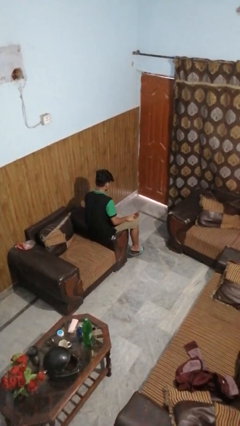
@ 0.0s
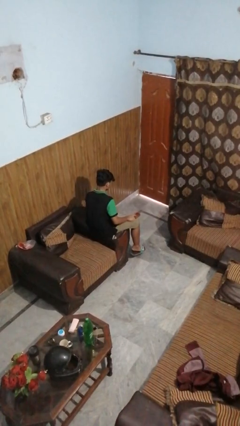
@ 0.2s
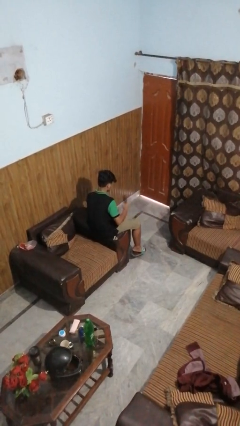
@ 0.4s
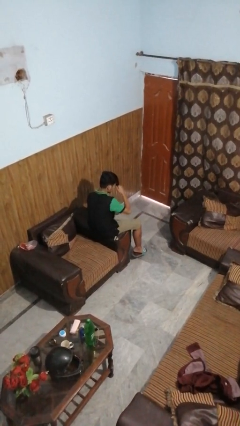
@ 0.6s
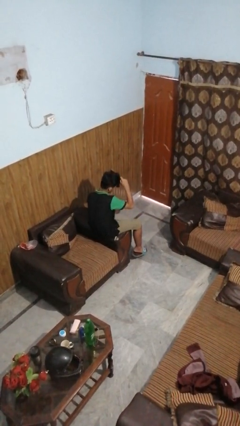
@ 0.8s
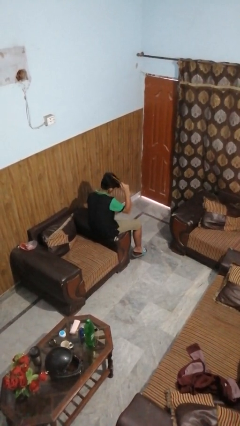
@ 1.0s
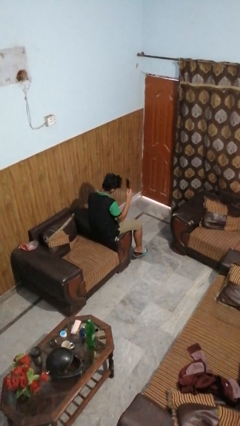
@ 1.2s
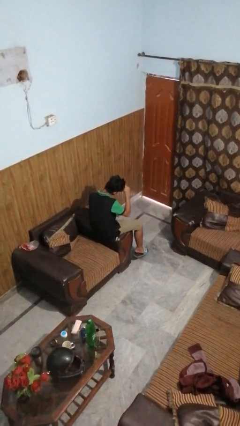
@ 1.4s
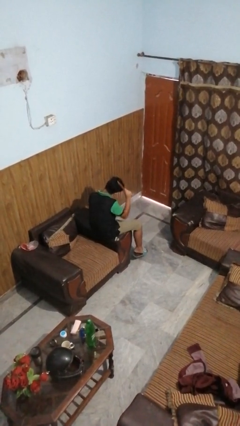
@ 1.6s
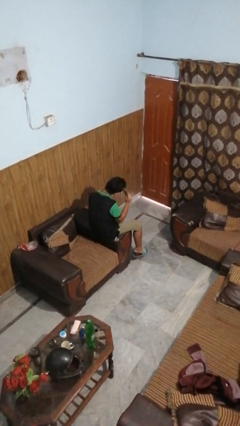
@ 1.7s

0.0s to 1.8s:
person brushes hair

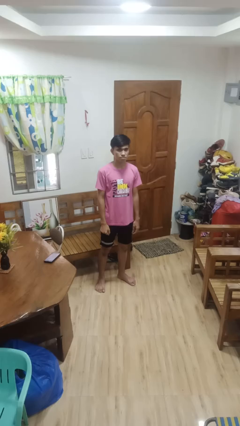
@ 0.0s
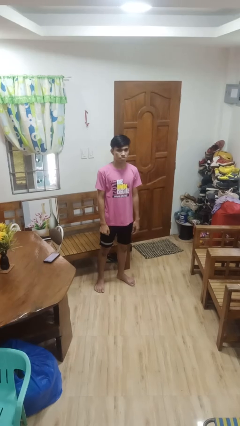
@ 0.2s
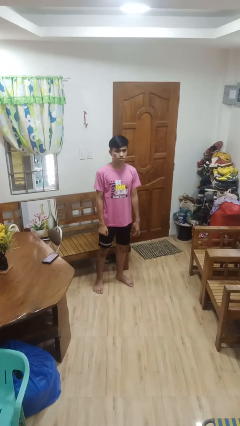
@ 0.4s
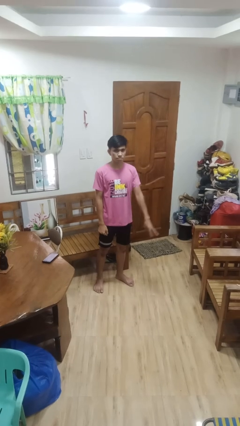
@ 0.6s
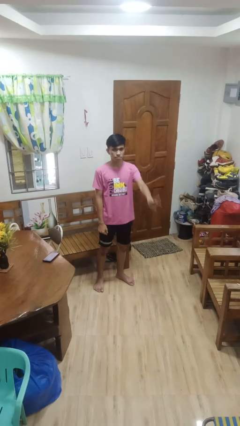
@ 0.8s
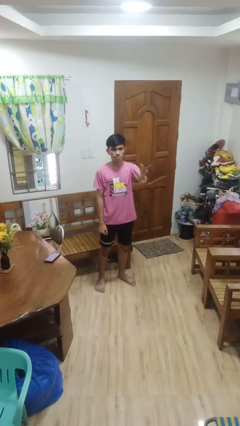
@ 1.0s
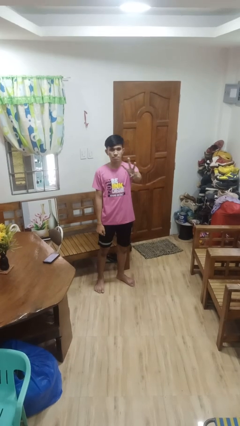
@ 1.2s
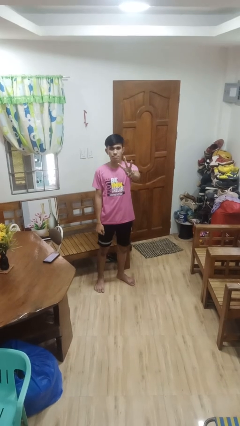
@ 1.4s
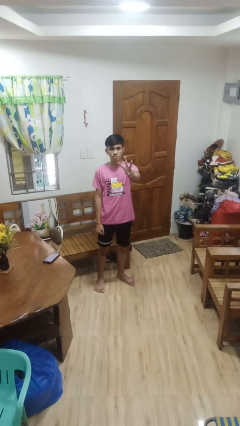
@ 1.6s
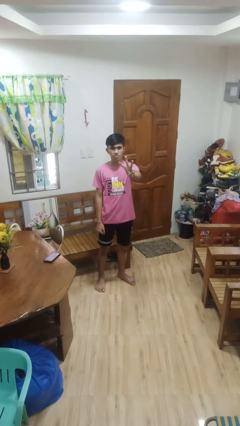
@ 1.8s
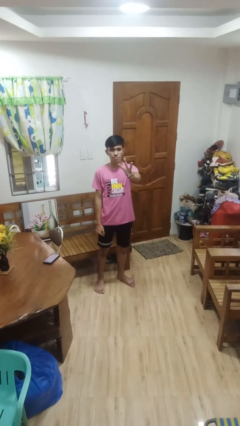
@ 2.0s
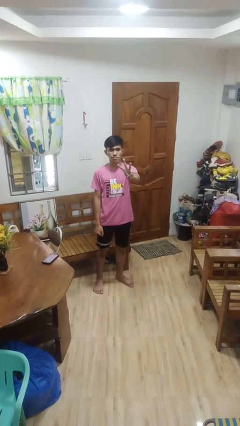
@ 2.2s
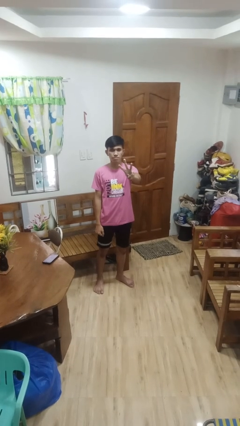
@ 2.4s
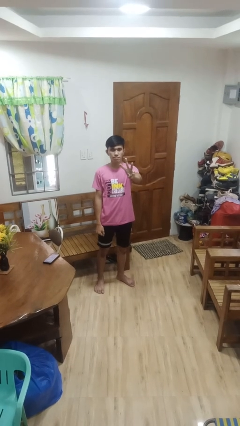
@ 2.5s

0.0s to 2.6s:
person gestures number three

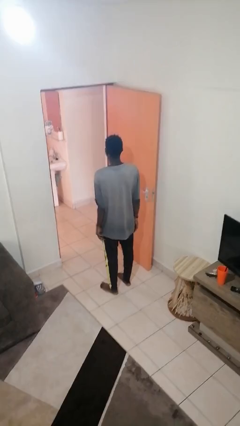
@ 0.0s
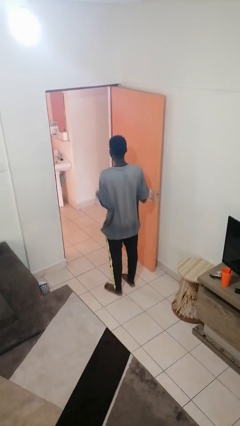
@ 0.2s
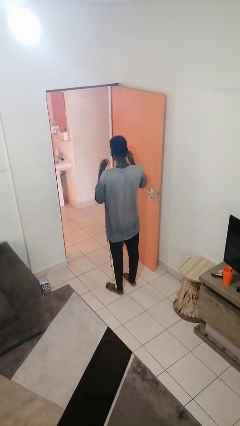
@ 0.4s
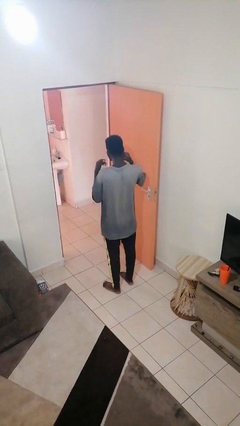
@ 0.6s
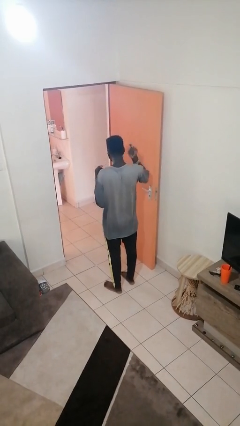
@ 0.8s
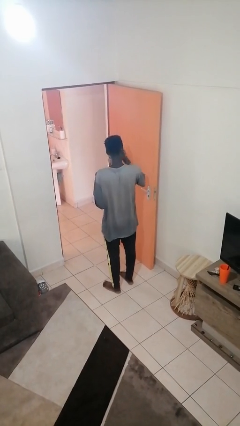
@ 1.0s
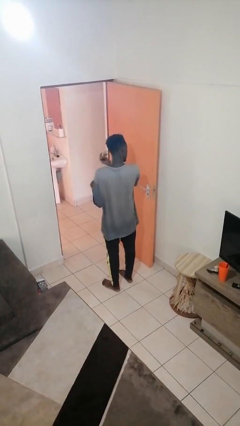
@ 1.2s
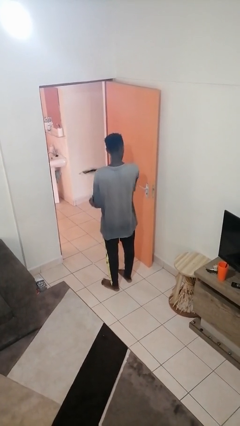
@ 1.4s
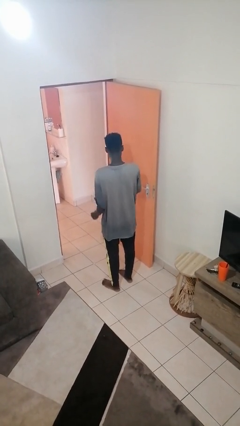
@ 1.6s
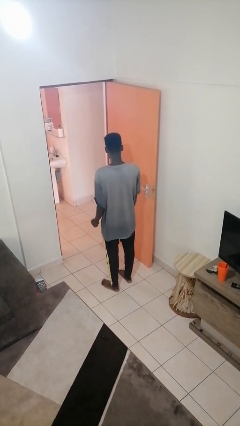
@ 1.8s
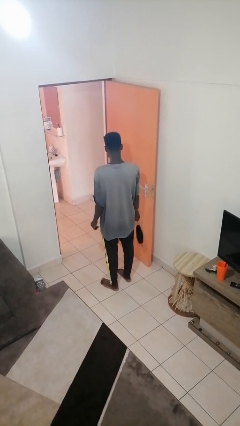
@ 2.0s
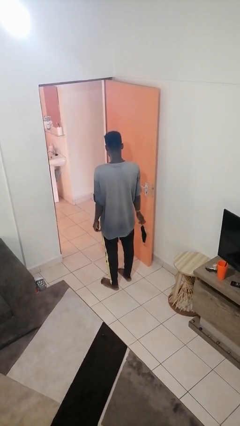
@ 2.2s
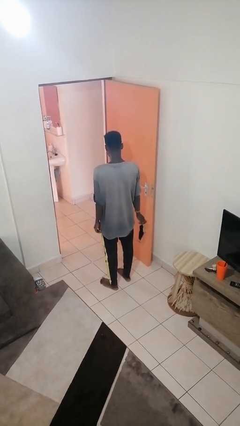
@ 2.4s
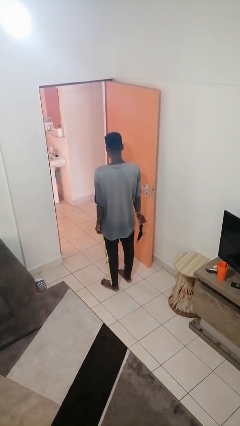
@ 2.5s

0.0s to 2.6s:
person takes off facemask

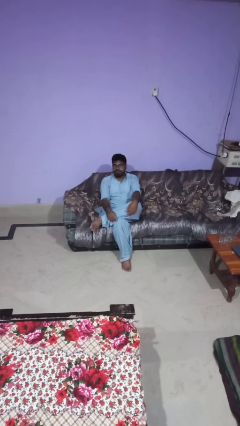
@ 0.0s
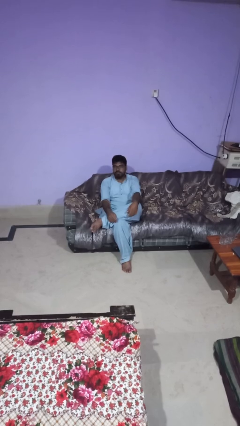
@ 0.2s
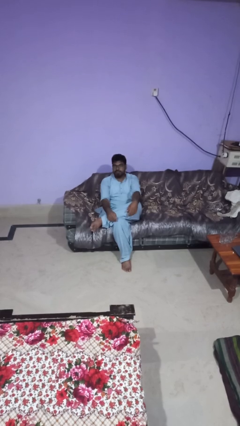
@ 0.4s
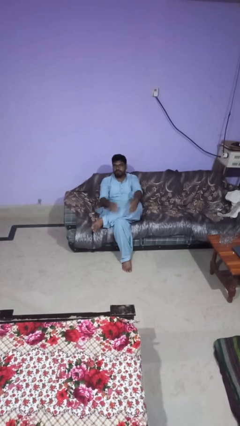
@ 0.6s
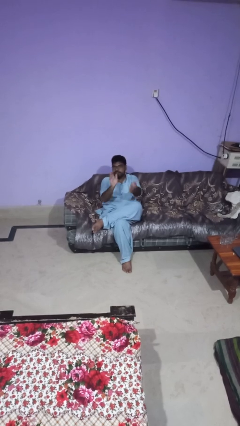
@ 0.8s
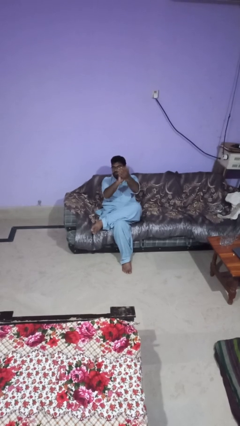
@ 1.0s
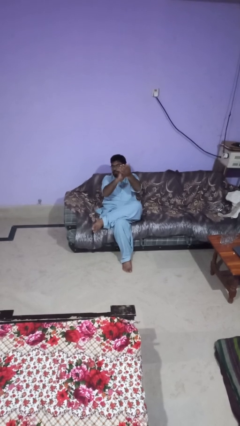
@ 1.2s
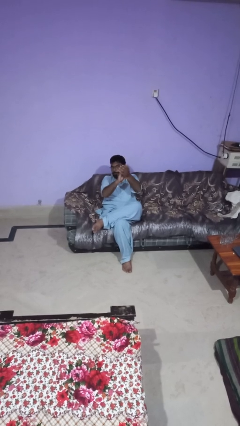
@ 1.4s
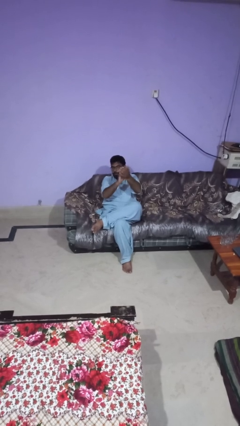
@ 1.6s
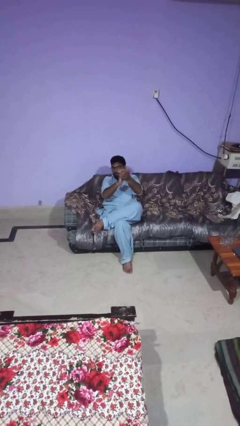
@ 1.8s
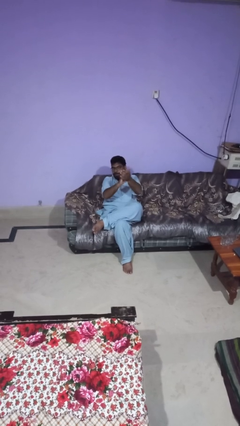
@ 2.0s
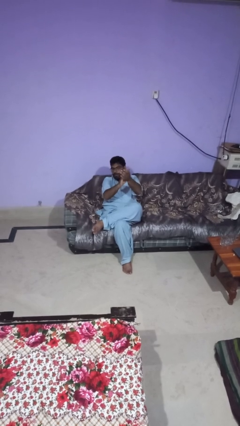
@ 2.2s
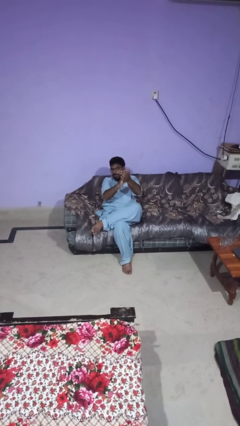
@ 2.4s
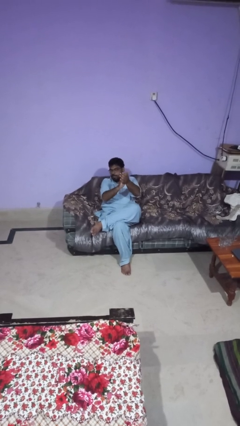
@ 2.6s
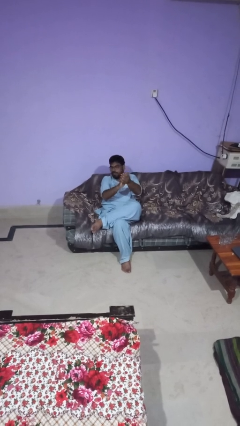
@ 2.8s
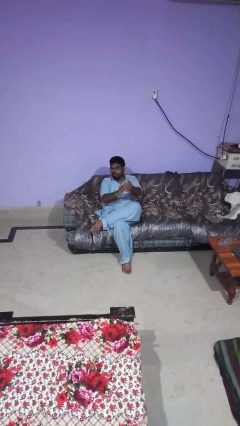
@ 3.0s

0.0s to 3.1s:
person claps hands

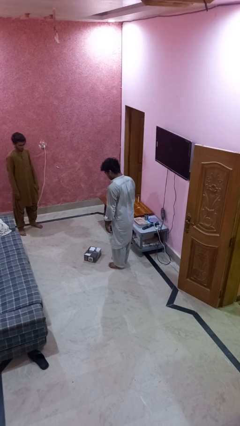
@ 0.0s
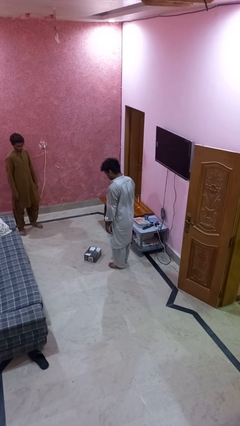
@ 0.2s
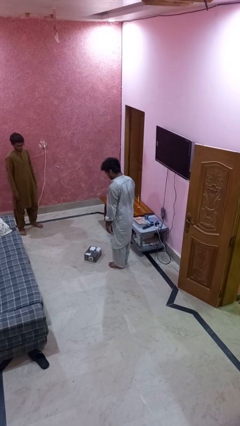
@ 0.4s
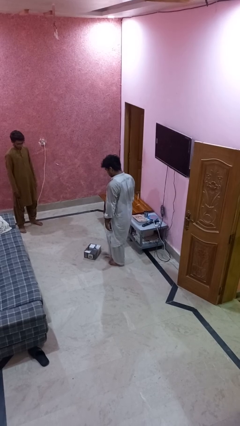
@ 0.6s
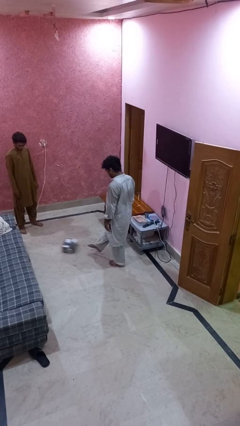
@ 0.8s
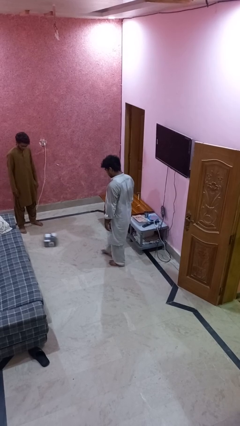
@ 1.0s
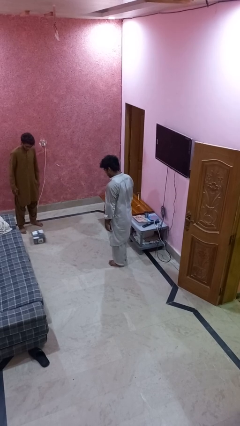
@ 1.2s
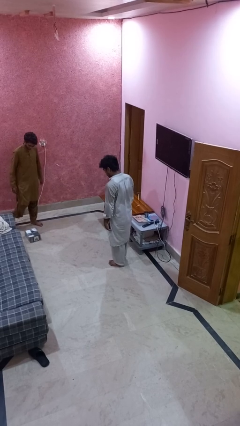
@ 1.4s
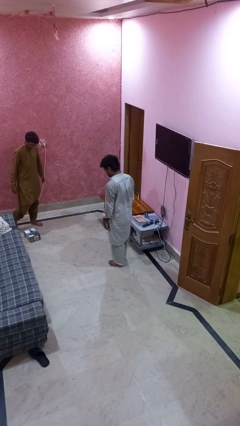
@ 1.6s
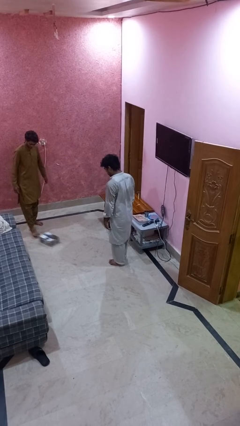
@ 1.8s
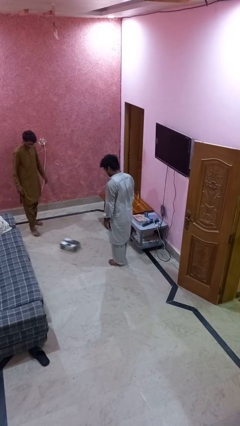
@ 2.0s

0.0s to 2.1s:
person kicks object to person

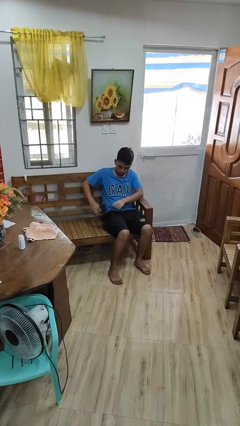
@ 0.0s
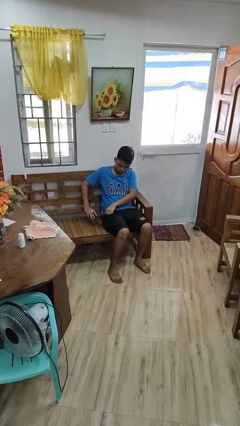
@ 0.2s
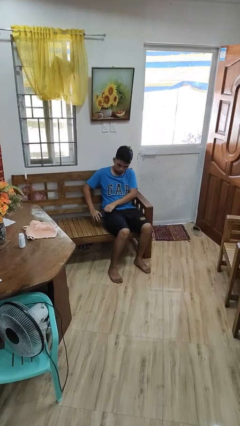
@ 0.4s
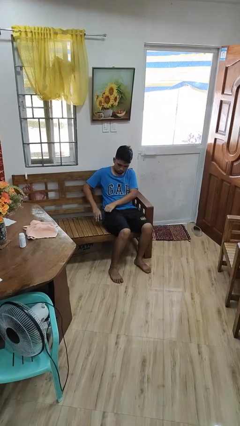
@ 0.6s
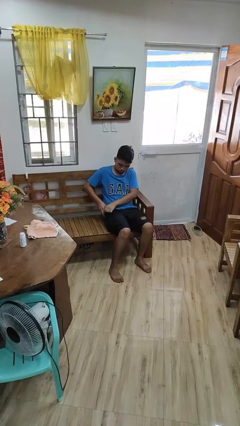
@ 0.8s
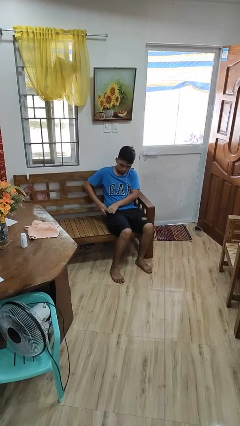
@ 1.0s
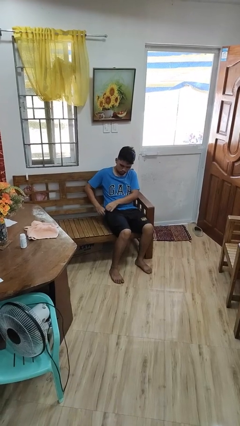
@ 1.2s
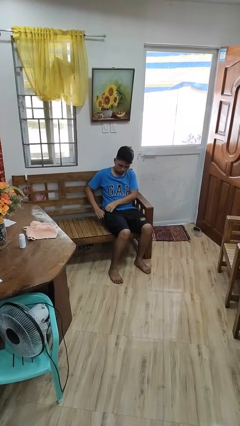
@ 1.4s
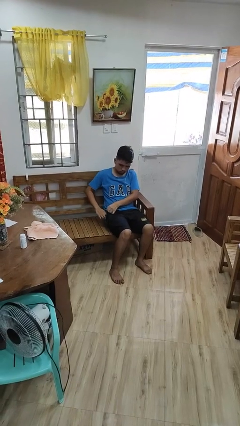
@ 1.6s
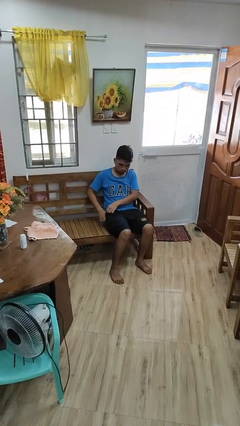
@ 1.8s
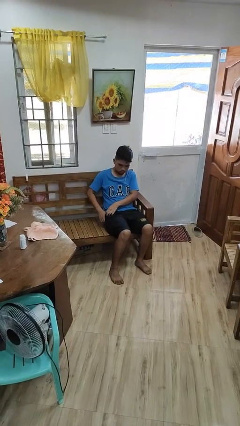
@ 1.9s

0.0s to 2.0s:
person puts phone into pocket

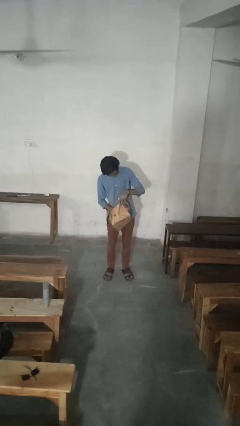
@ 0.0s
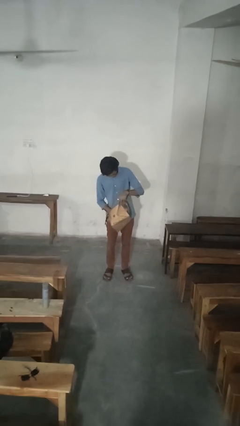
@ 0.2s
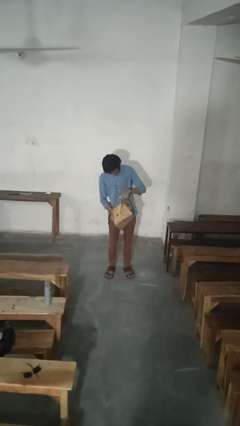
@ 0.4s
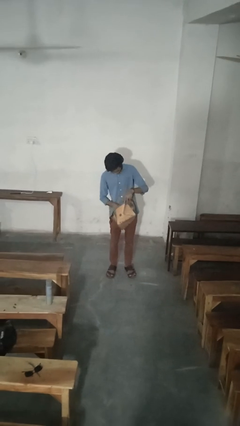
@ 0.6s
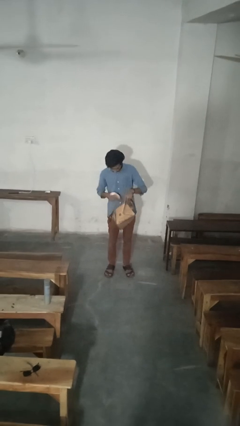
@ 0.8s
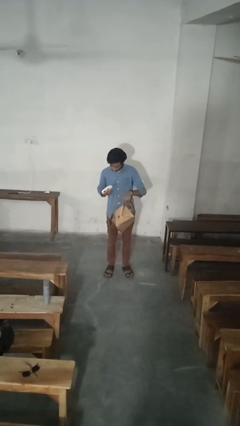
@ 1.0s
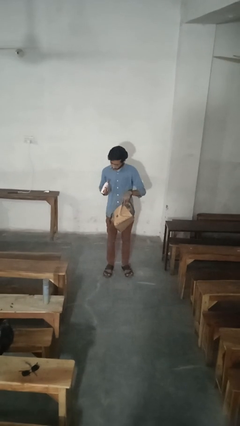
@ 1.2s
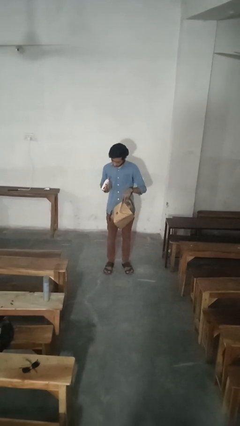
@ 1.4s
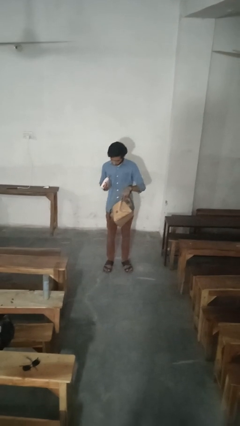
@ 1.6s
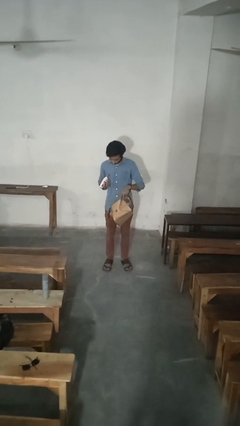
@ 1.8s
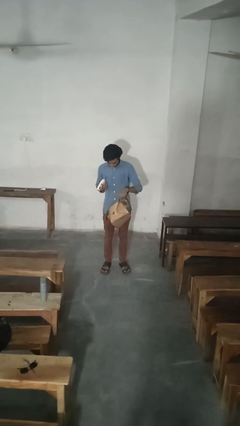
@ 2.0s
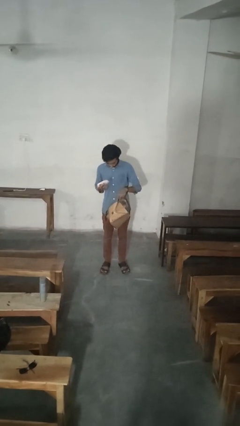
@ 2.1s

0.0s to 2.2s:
person takes object from purse

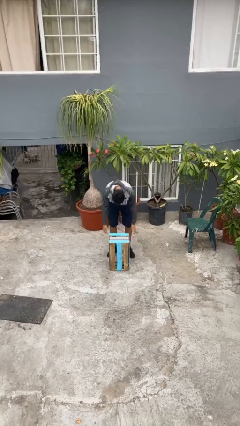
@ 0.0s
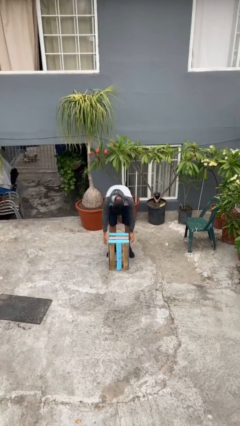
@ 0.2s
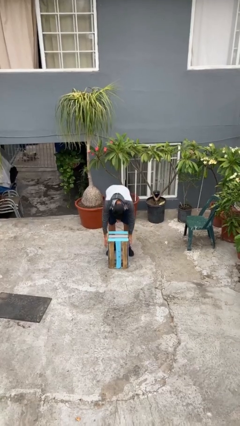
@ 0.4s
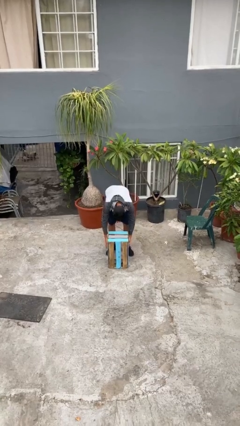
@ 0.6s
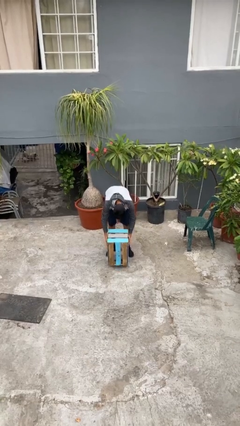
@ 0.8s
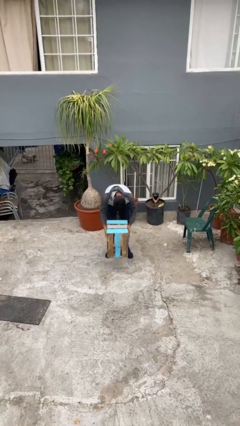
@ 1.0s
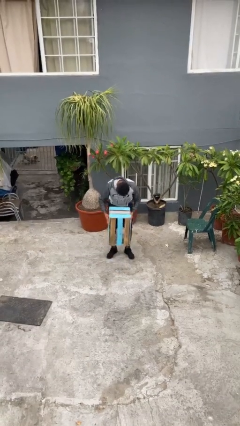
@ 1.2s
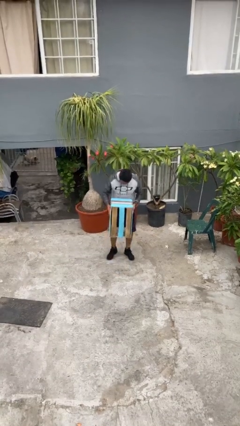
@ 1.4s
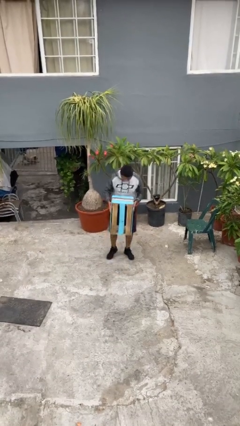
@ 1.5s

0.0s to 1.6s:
person picks up object from floor
